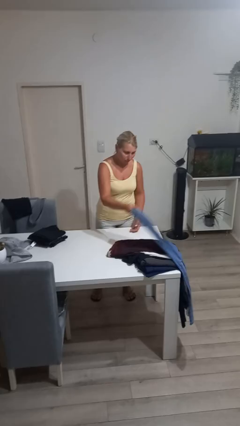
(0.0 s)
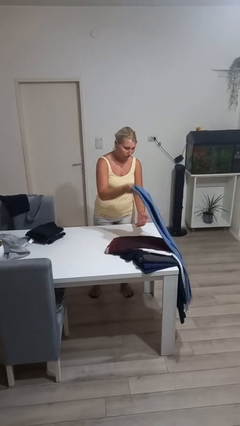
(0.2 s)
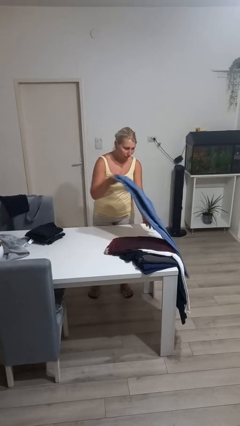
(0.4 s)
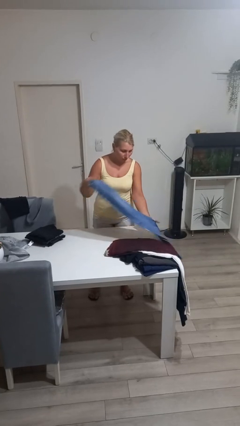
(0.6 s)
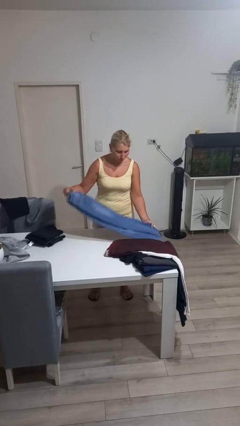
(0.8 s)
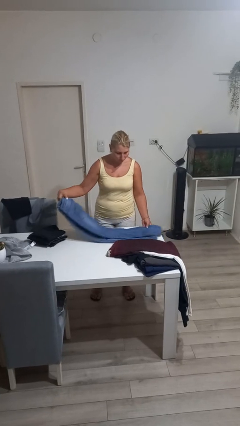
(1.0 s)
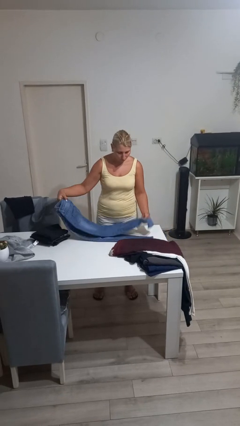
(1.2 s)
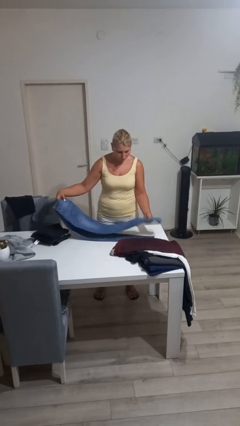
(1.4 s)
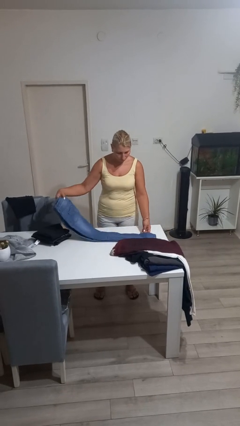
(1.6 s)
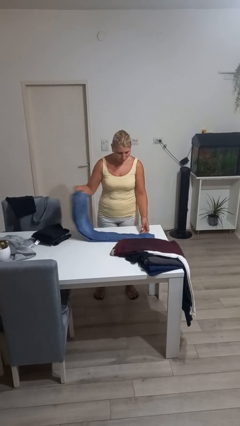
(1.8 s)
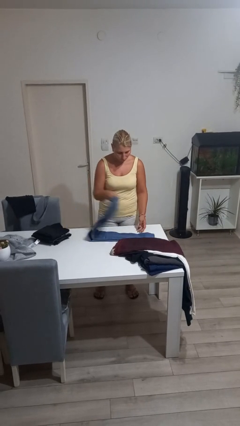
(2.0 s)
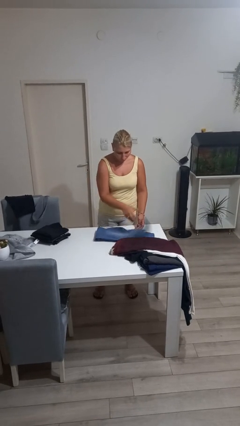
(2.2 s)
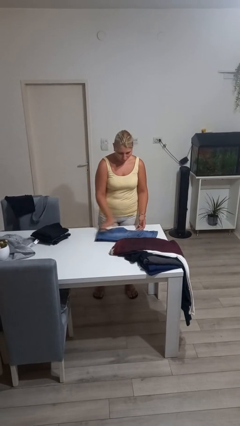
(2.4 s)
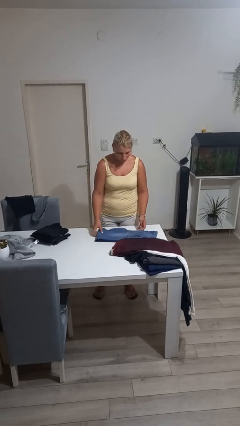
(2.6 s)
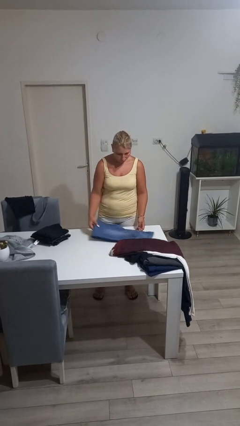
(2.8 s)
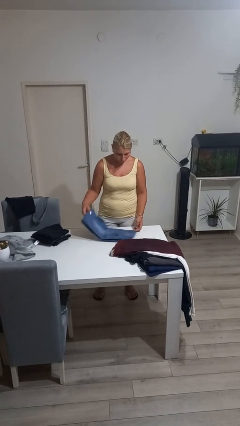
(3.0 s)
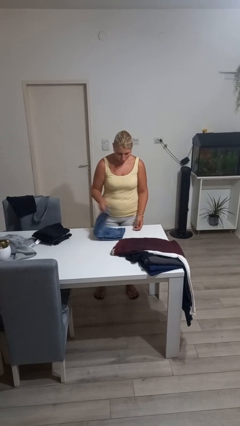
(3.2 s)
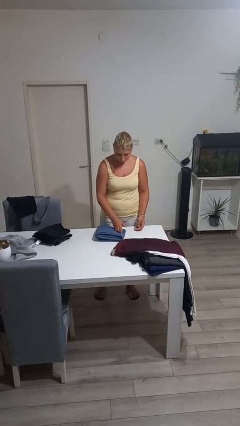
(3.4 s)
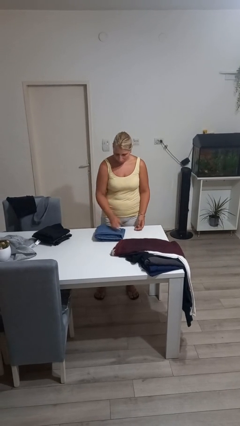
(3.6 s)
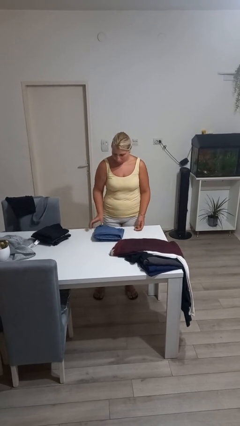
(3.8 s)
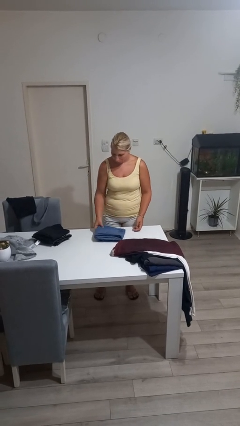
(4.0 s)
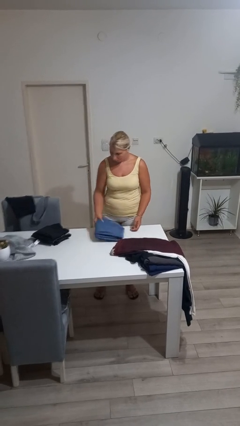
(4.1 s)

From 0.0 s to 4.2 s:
person folds pants

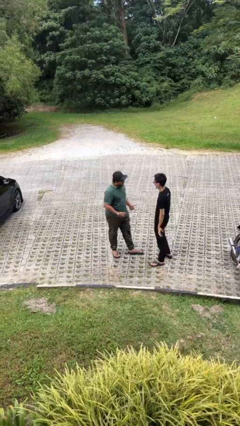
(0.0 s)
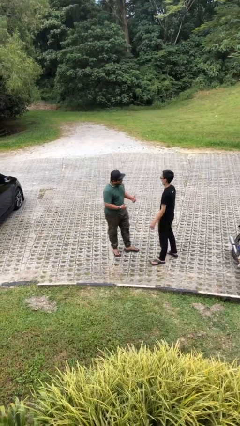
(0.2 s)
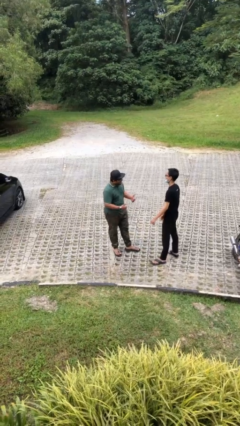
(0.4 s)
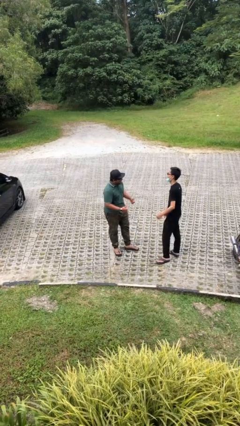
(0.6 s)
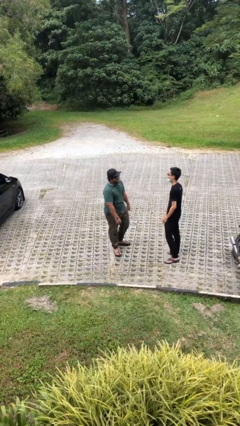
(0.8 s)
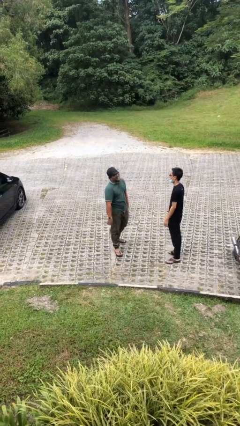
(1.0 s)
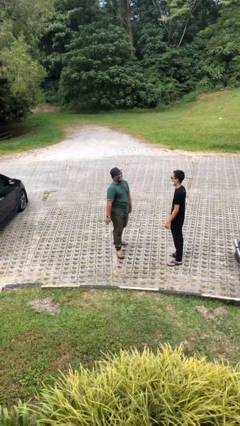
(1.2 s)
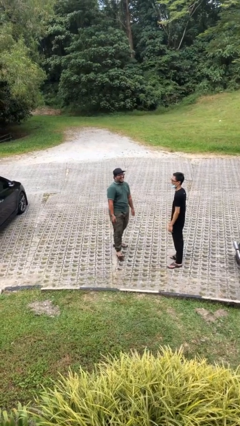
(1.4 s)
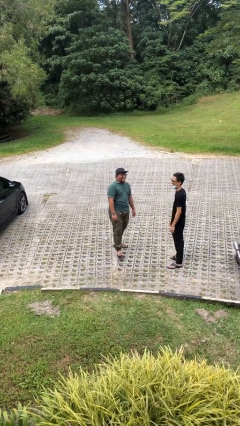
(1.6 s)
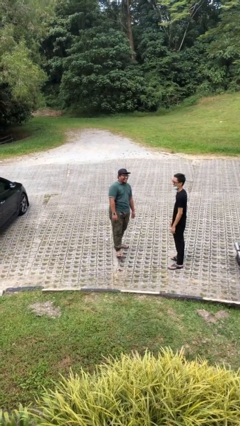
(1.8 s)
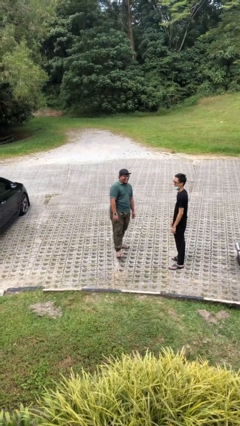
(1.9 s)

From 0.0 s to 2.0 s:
person talks to person

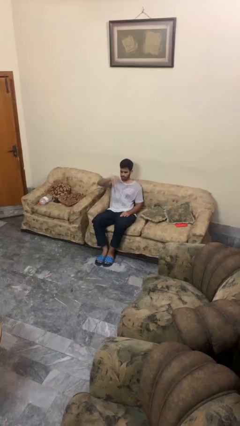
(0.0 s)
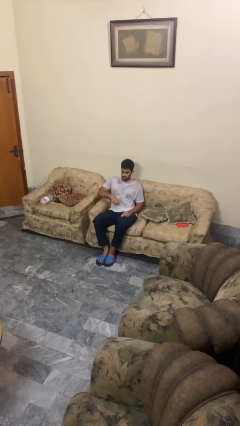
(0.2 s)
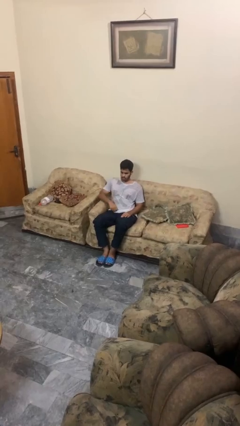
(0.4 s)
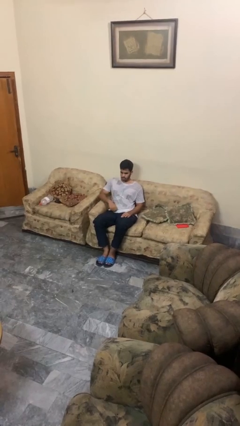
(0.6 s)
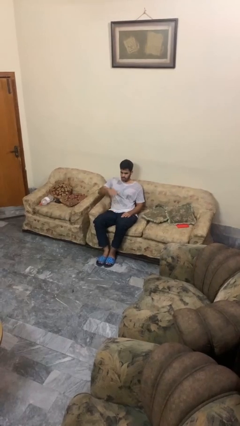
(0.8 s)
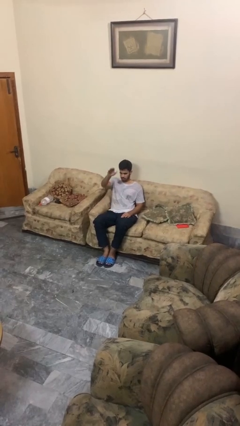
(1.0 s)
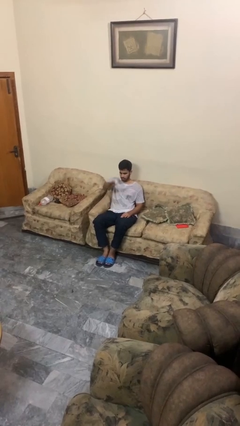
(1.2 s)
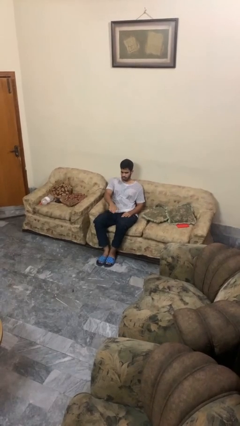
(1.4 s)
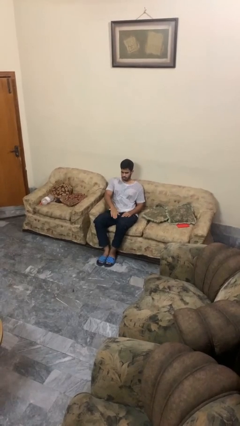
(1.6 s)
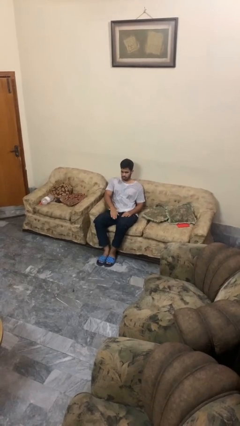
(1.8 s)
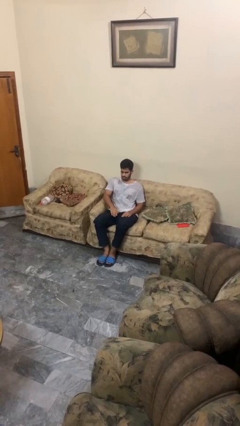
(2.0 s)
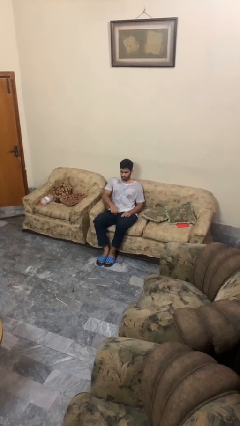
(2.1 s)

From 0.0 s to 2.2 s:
person gestures swipe down

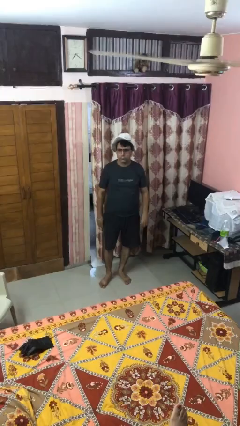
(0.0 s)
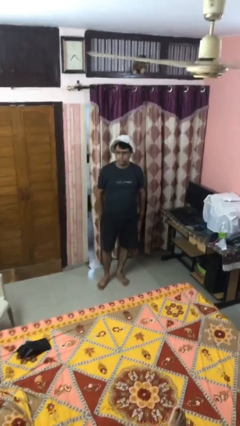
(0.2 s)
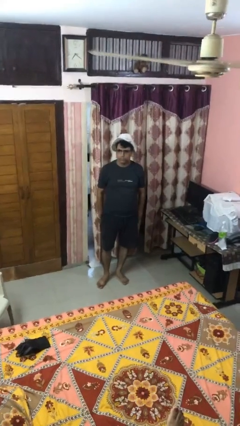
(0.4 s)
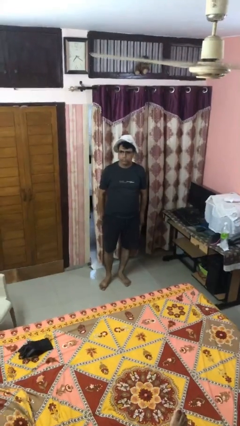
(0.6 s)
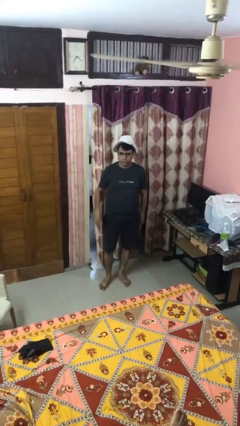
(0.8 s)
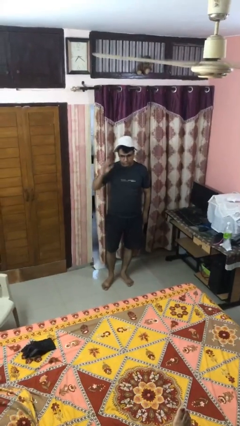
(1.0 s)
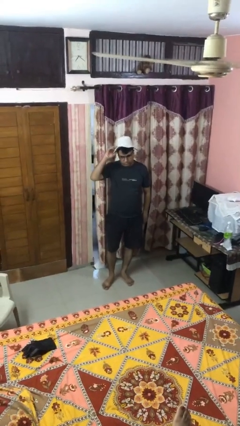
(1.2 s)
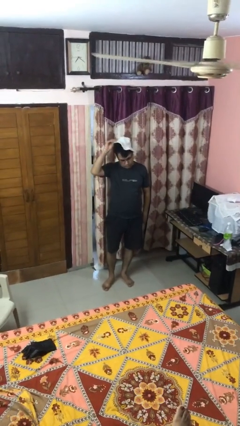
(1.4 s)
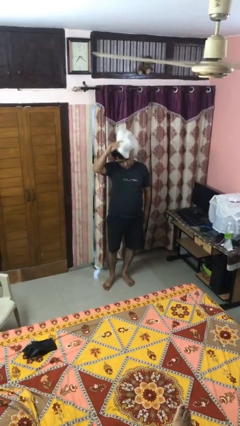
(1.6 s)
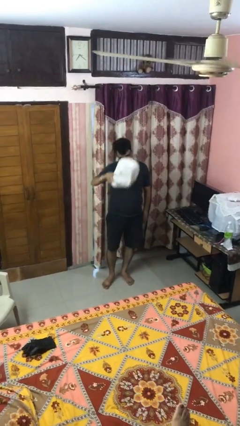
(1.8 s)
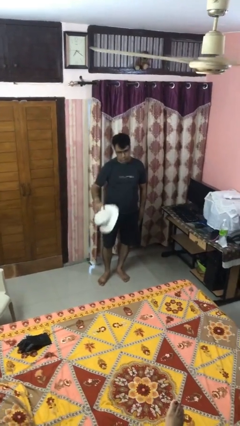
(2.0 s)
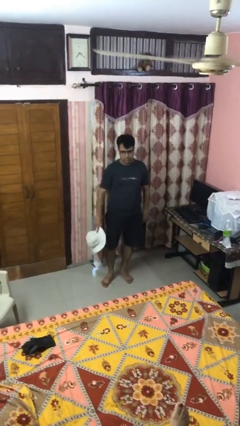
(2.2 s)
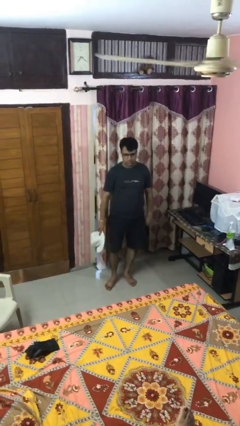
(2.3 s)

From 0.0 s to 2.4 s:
person takes off hat

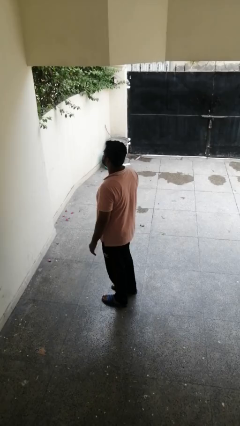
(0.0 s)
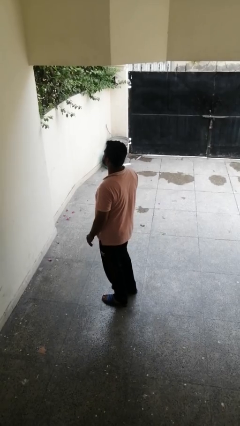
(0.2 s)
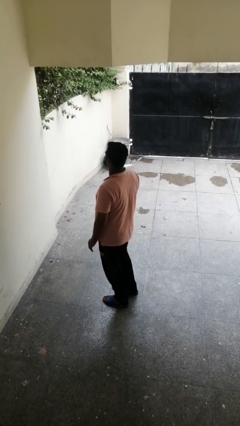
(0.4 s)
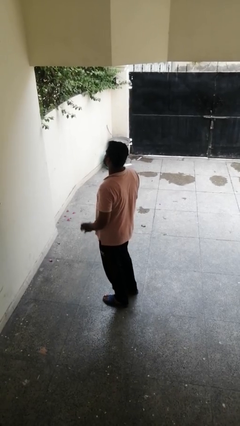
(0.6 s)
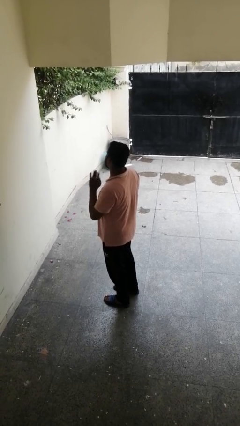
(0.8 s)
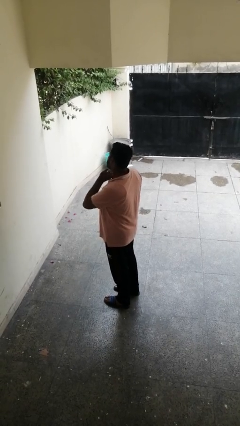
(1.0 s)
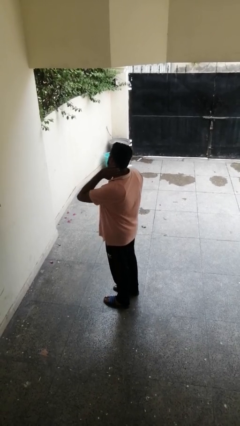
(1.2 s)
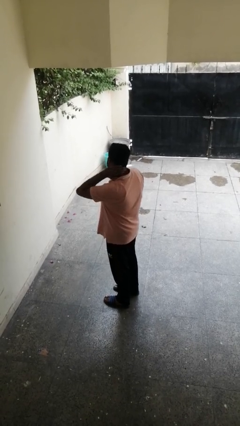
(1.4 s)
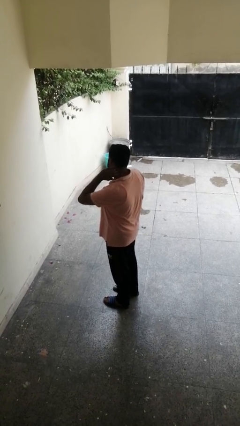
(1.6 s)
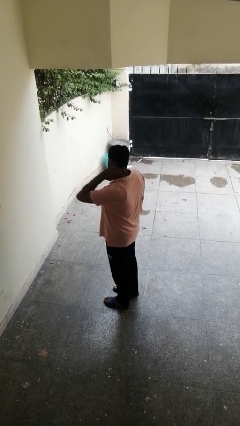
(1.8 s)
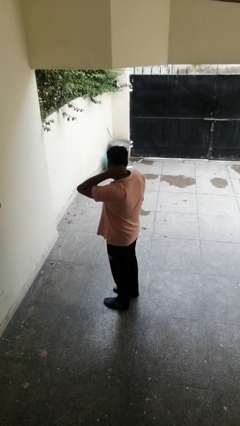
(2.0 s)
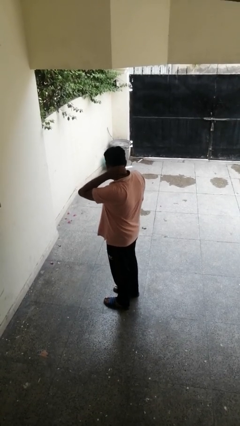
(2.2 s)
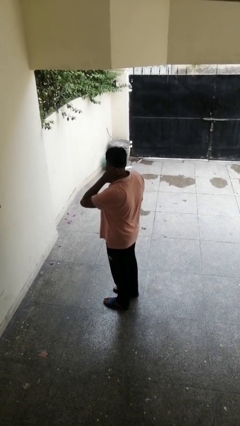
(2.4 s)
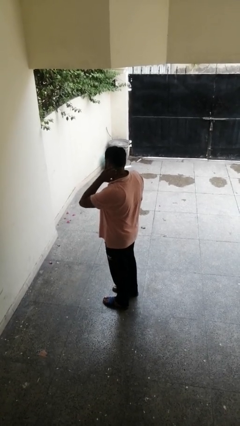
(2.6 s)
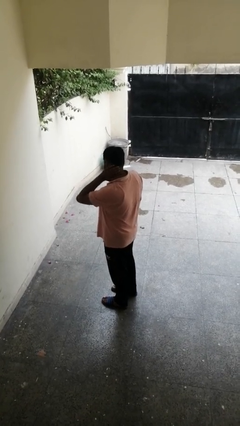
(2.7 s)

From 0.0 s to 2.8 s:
person rubs neck

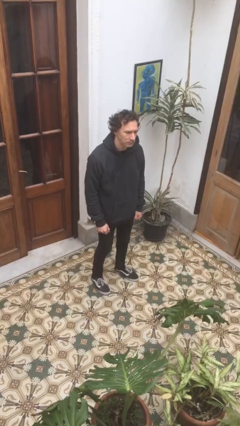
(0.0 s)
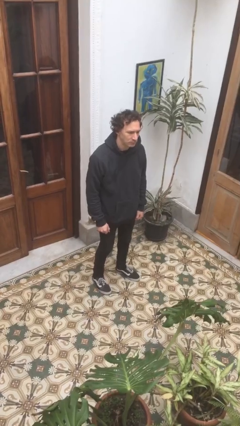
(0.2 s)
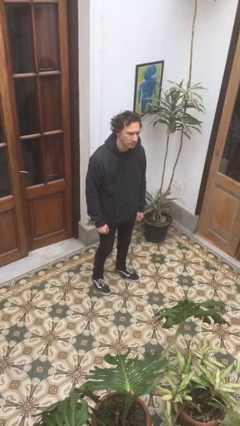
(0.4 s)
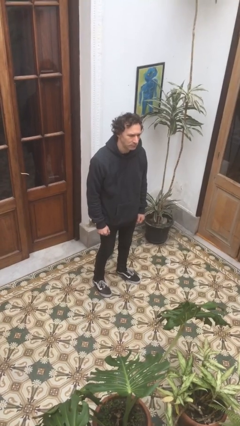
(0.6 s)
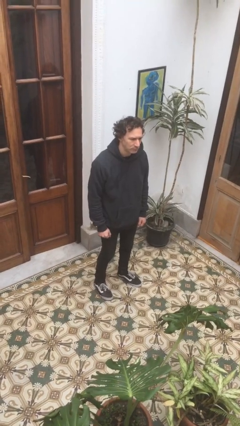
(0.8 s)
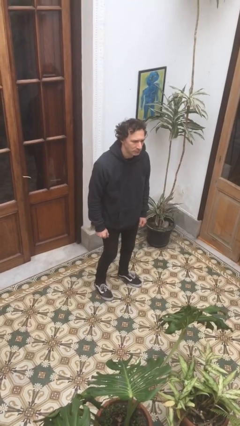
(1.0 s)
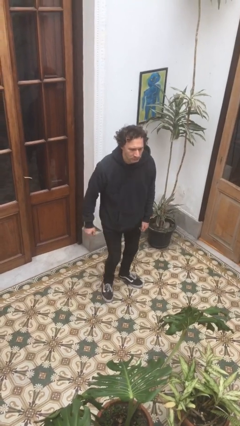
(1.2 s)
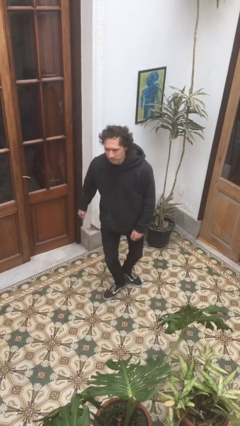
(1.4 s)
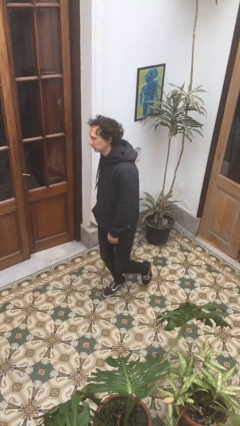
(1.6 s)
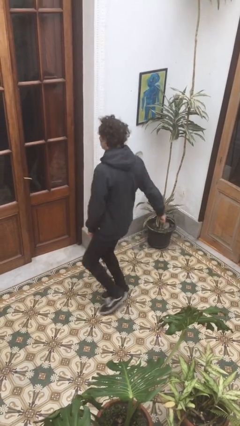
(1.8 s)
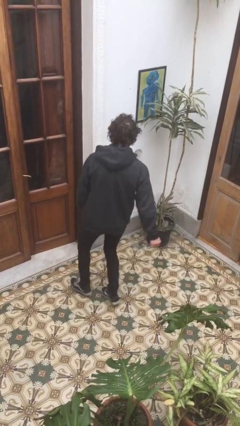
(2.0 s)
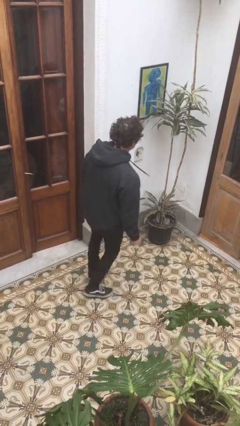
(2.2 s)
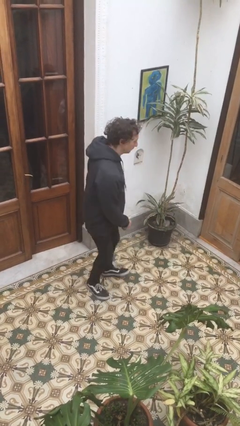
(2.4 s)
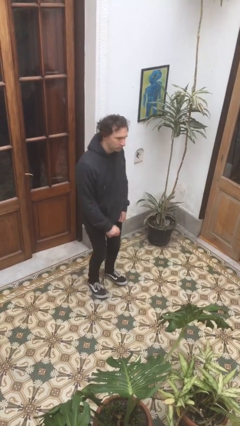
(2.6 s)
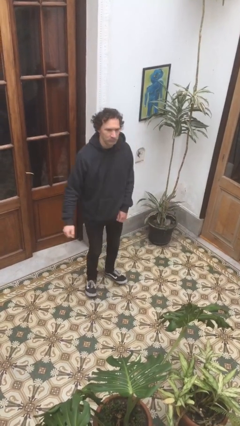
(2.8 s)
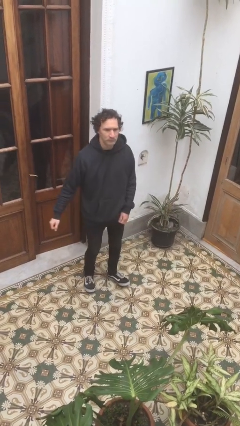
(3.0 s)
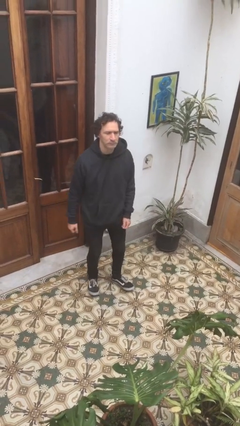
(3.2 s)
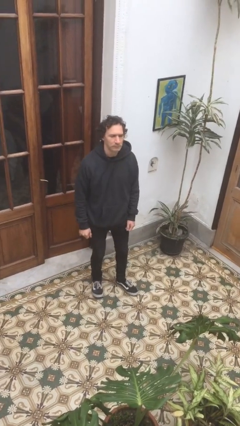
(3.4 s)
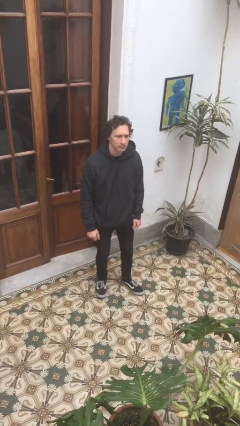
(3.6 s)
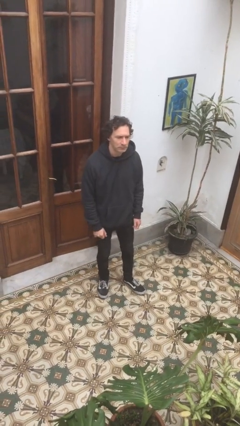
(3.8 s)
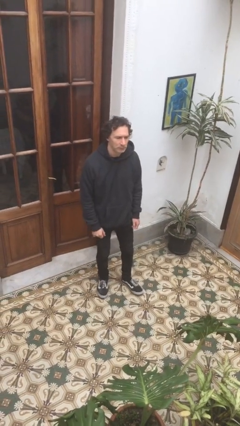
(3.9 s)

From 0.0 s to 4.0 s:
person twirls
